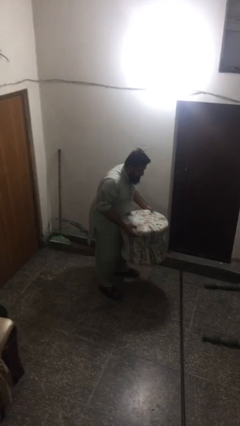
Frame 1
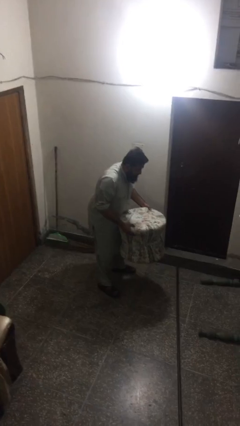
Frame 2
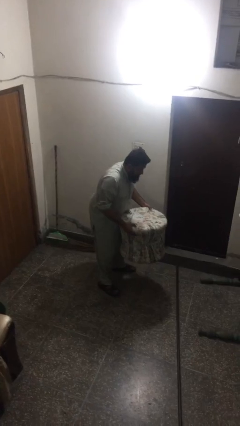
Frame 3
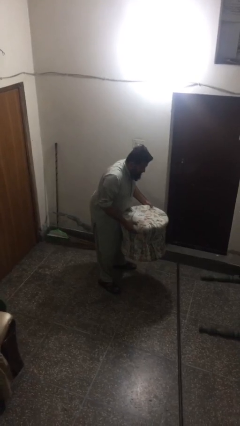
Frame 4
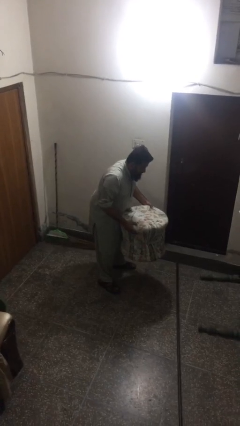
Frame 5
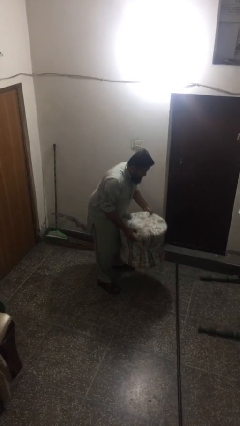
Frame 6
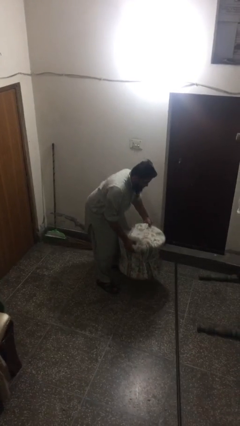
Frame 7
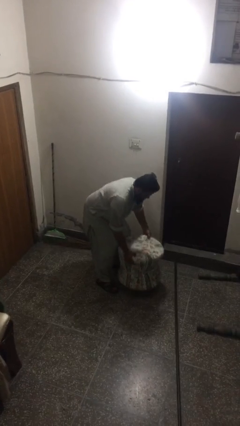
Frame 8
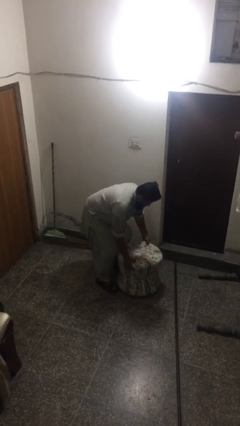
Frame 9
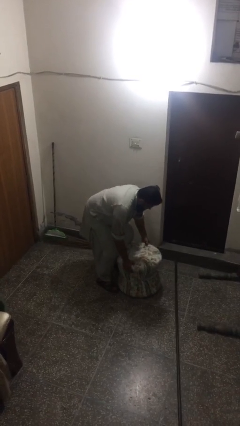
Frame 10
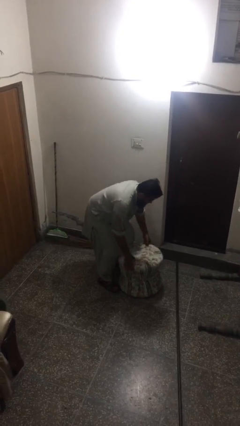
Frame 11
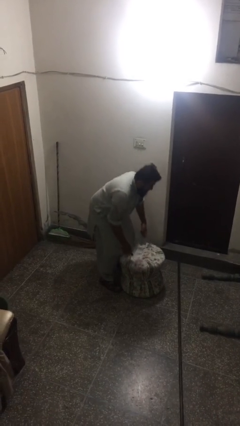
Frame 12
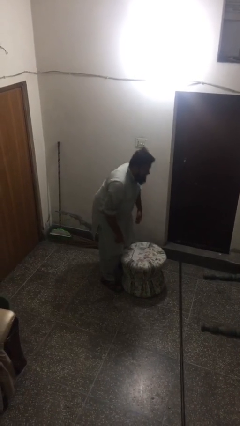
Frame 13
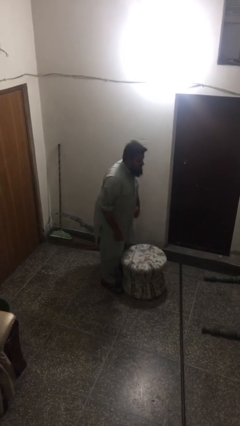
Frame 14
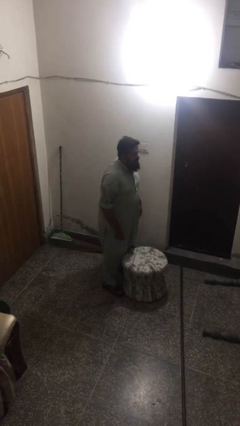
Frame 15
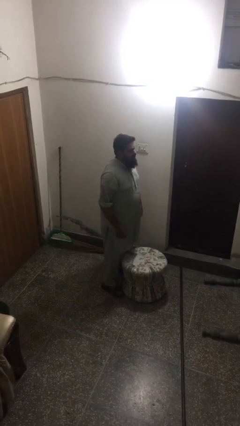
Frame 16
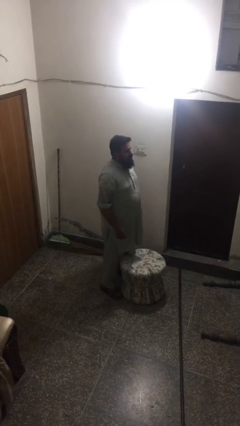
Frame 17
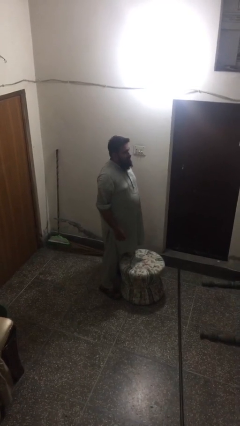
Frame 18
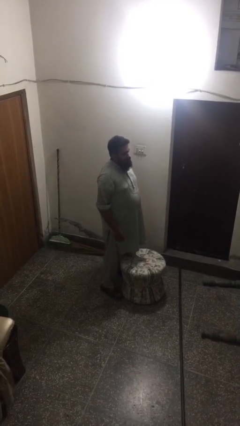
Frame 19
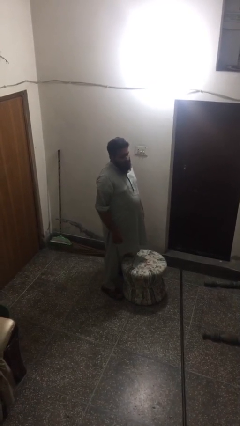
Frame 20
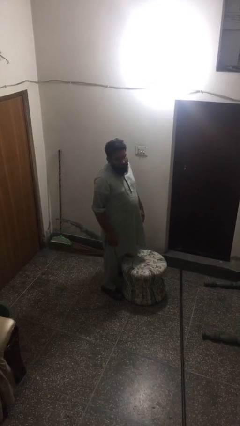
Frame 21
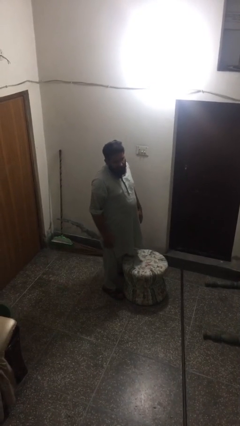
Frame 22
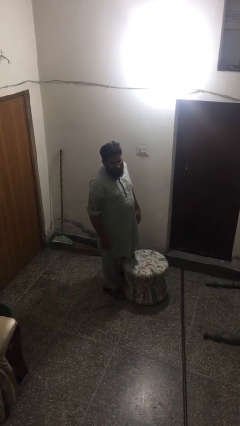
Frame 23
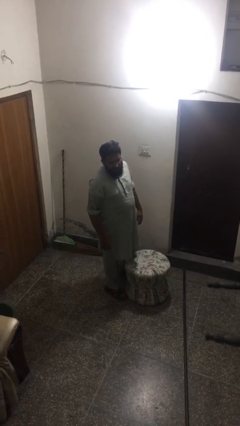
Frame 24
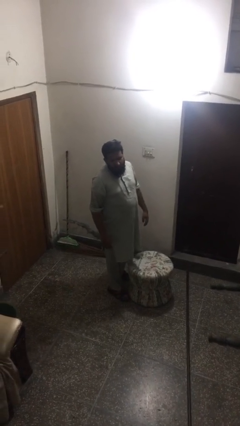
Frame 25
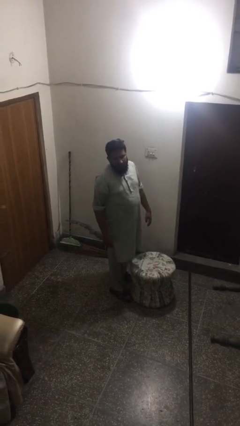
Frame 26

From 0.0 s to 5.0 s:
person puts down object on floor

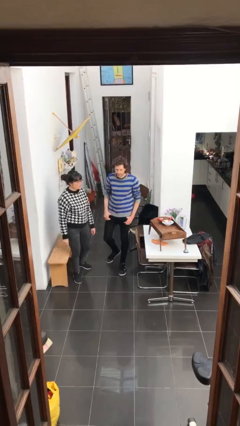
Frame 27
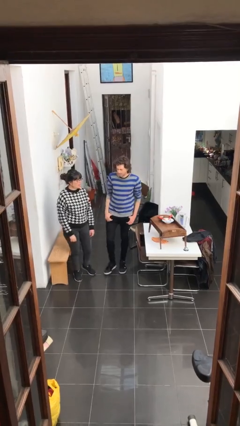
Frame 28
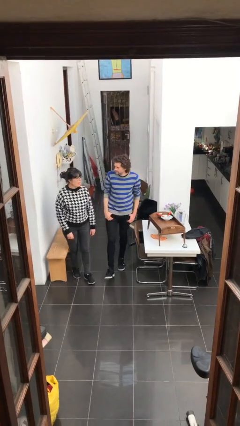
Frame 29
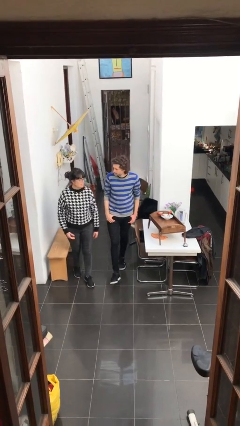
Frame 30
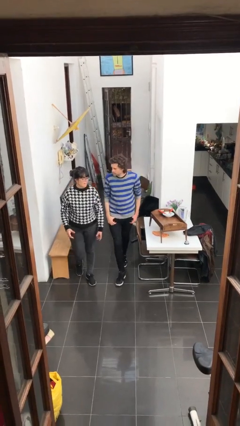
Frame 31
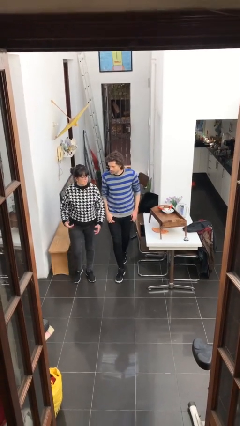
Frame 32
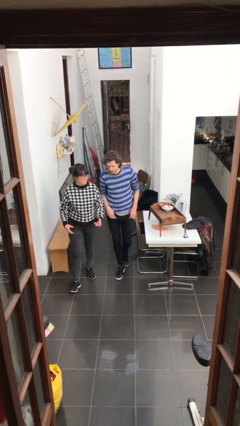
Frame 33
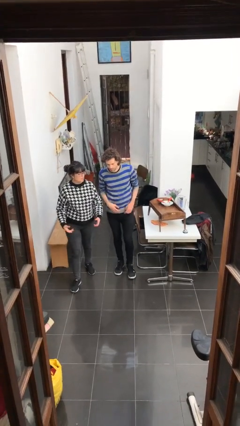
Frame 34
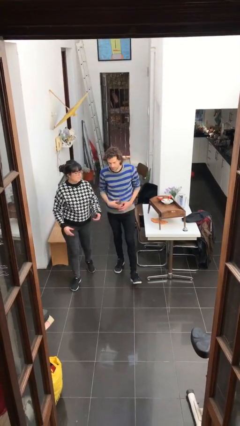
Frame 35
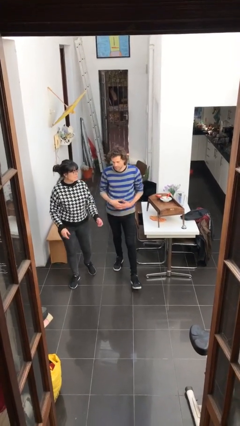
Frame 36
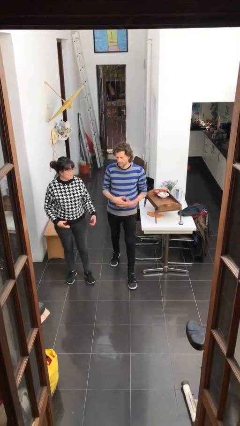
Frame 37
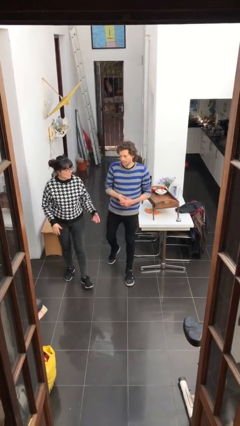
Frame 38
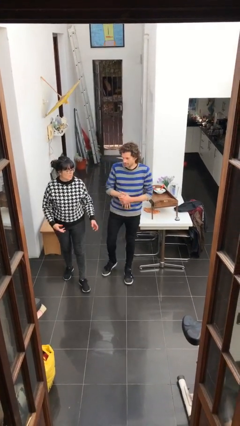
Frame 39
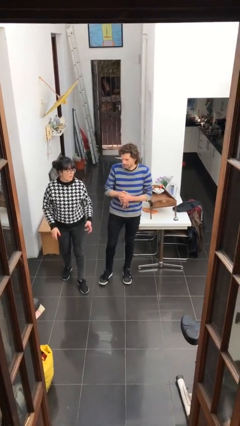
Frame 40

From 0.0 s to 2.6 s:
person talks to person

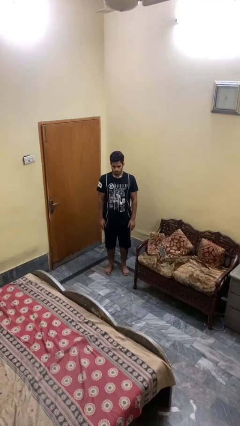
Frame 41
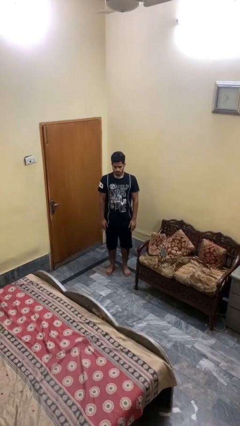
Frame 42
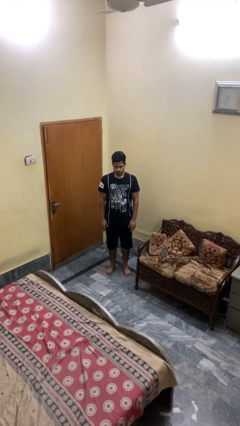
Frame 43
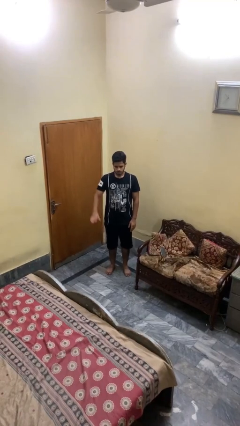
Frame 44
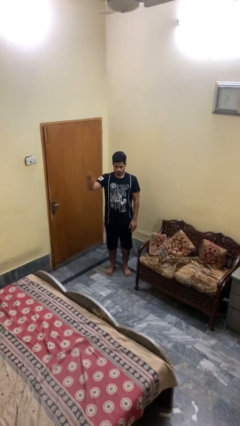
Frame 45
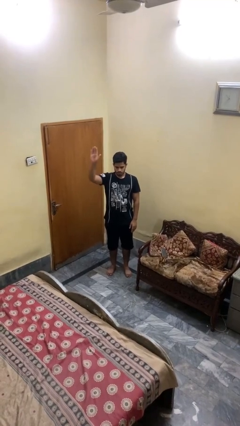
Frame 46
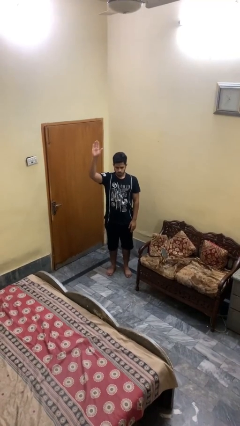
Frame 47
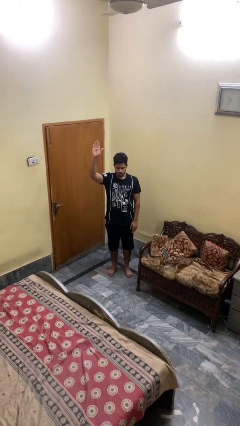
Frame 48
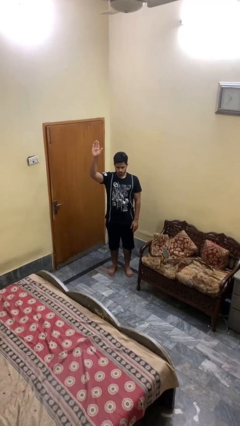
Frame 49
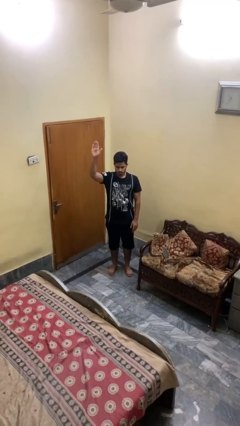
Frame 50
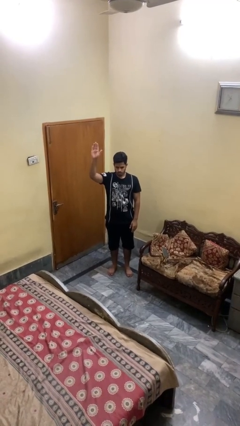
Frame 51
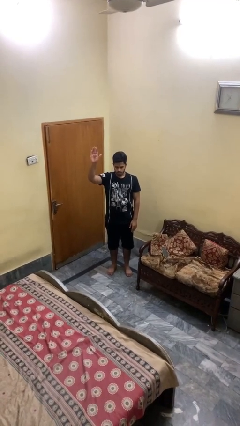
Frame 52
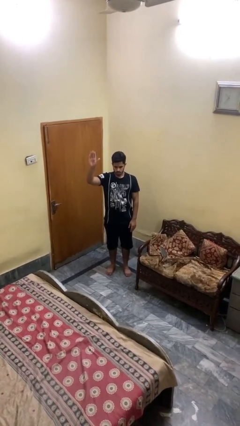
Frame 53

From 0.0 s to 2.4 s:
person gestures raise hand

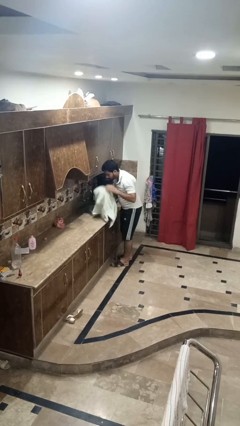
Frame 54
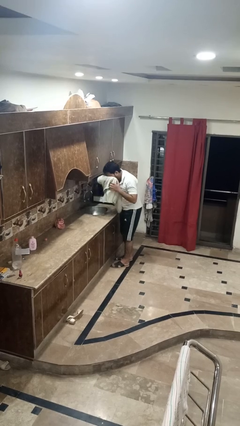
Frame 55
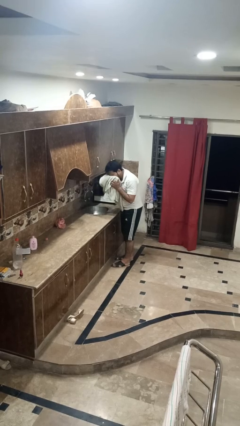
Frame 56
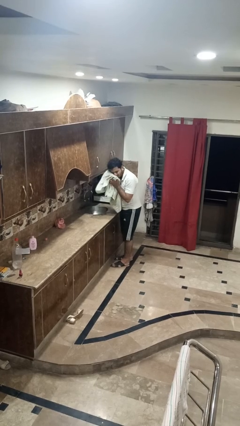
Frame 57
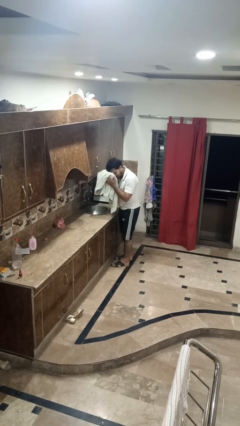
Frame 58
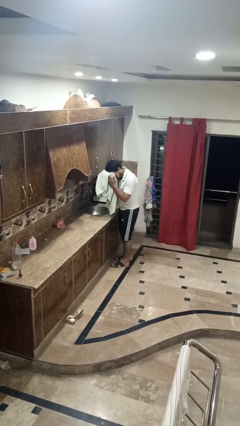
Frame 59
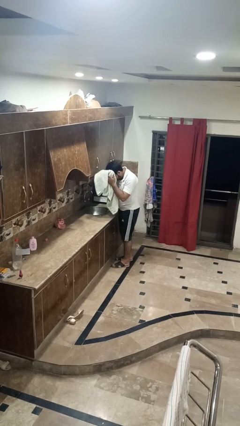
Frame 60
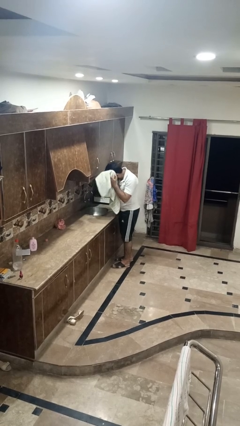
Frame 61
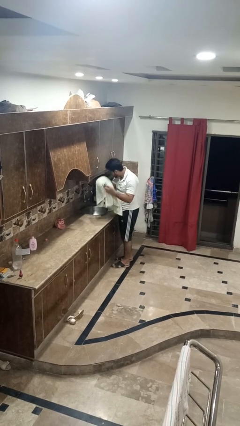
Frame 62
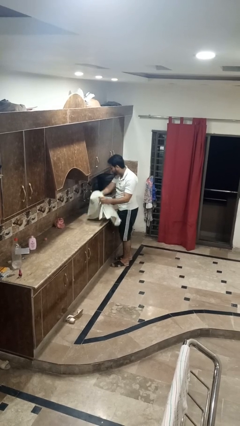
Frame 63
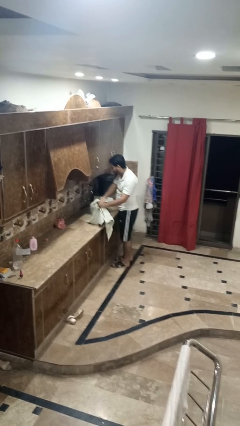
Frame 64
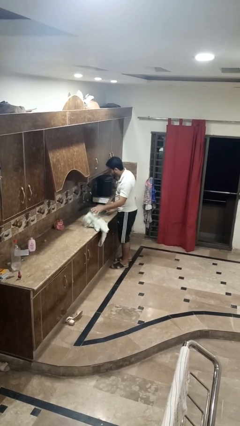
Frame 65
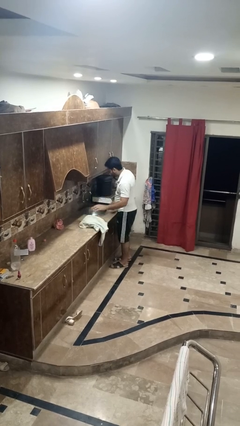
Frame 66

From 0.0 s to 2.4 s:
person dries face with towel

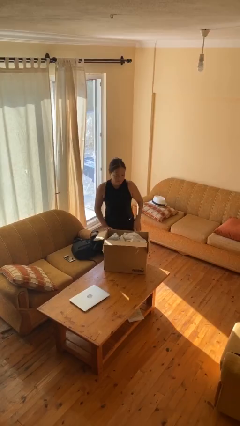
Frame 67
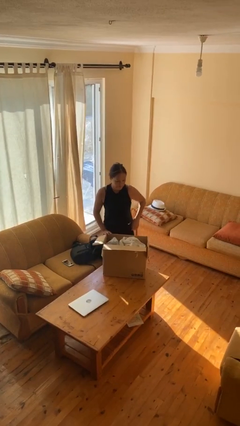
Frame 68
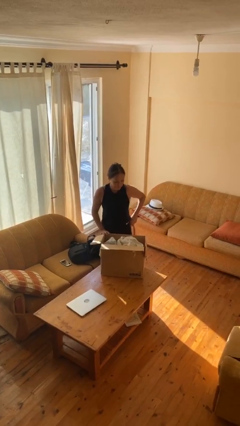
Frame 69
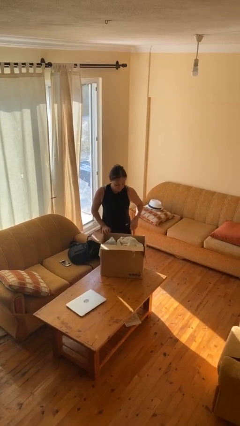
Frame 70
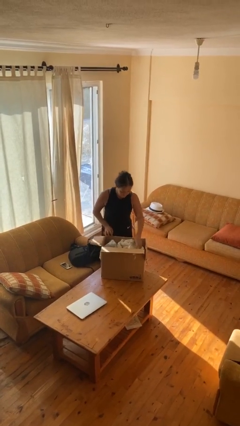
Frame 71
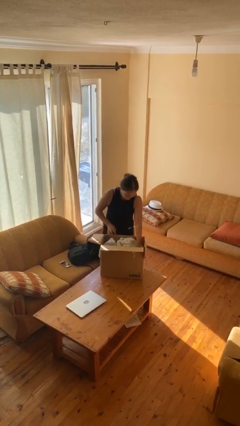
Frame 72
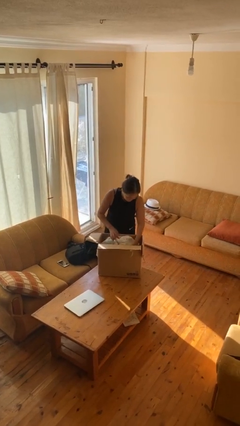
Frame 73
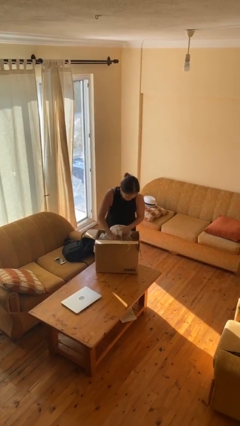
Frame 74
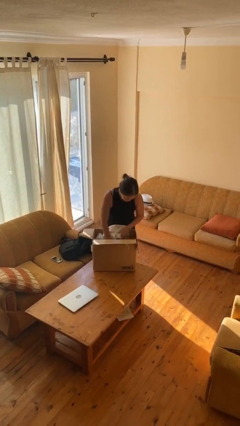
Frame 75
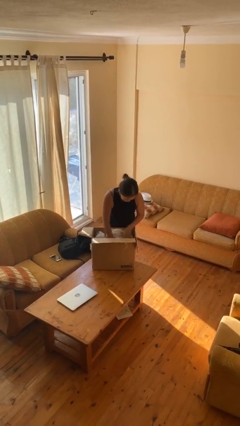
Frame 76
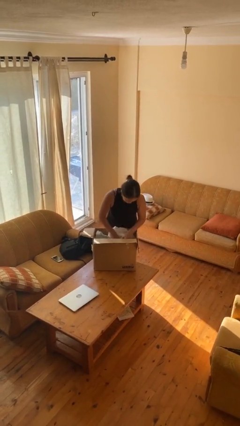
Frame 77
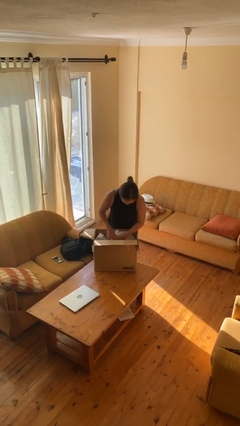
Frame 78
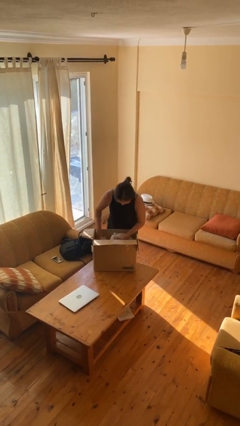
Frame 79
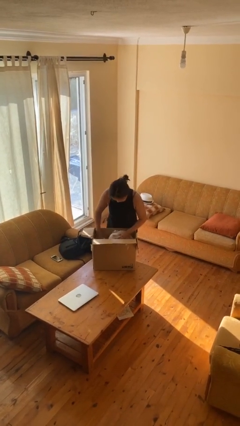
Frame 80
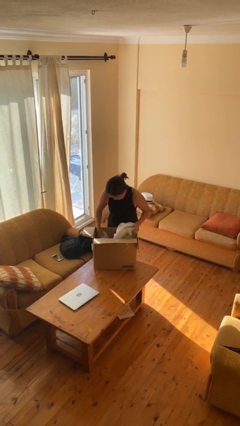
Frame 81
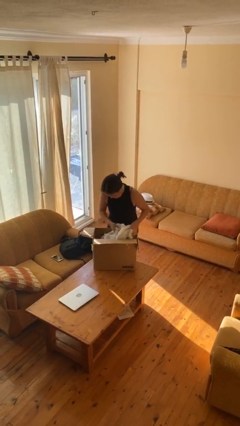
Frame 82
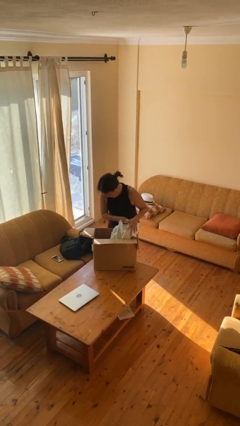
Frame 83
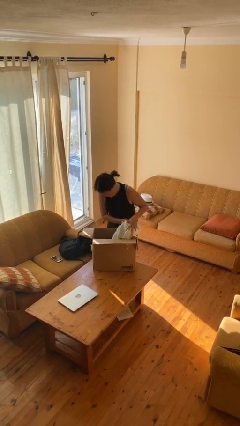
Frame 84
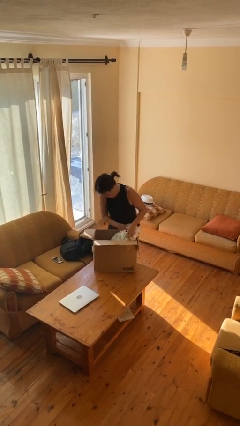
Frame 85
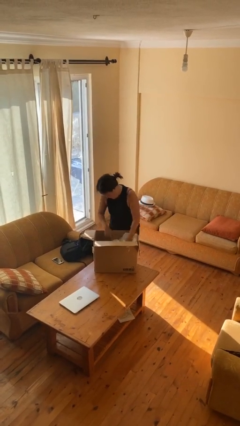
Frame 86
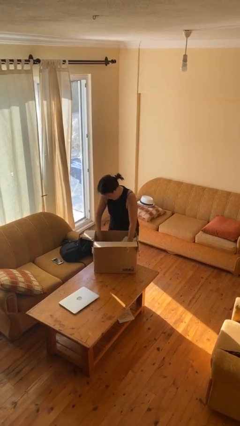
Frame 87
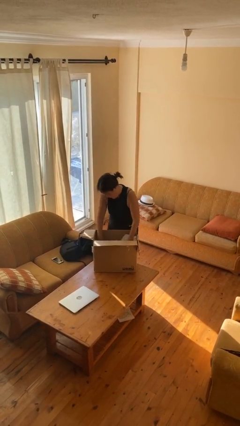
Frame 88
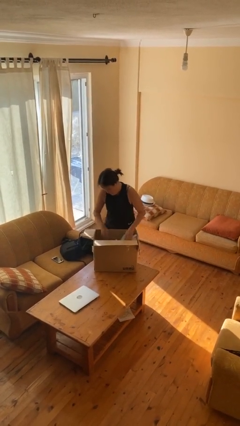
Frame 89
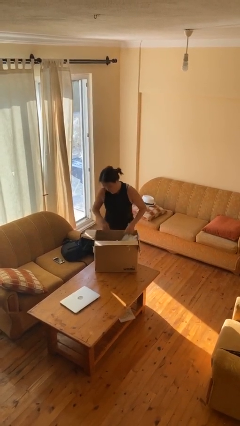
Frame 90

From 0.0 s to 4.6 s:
person searches in box

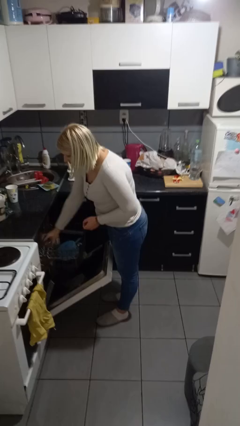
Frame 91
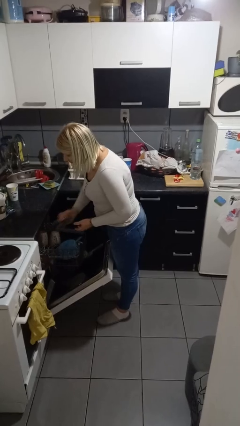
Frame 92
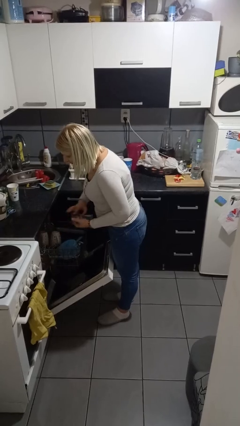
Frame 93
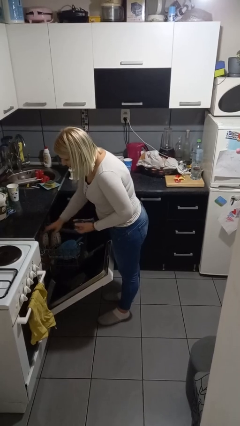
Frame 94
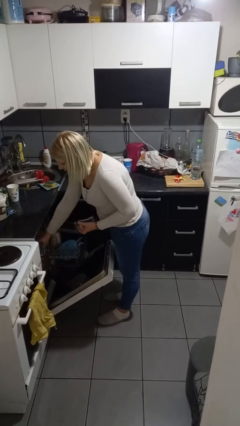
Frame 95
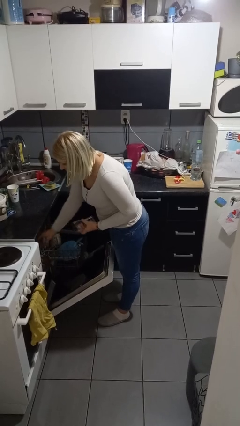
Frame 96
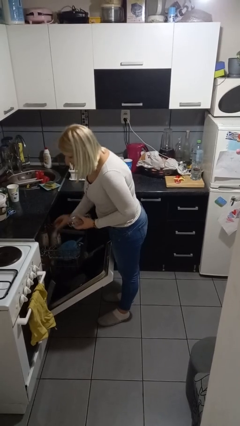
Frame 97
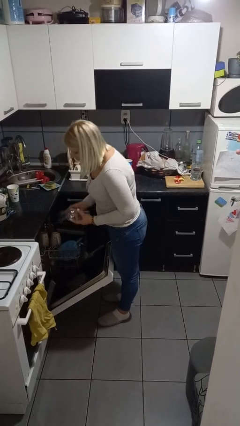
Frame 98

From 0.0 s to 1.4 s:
person unloads dishwasher
